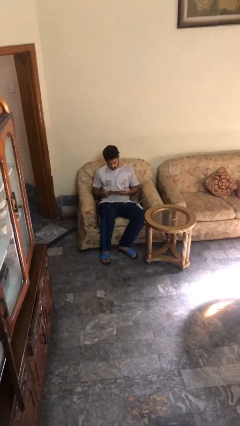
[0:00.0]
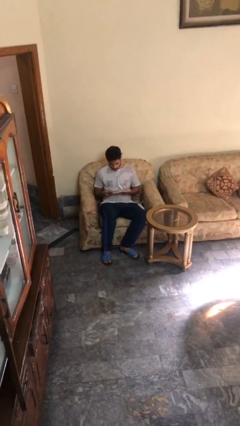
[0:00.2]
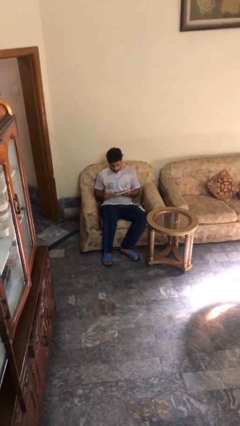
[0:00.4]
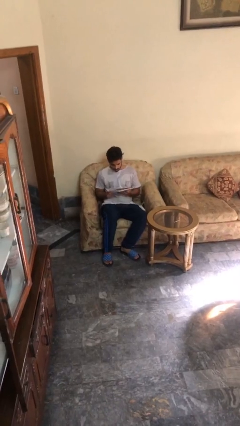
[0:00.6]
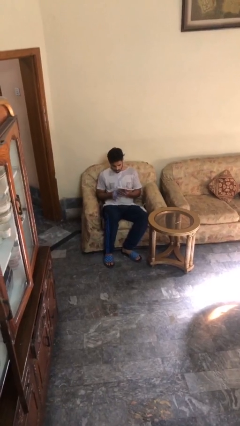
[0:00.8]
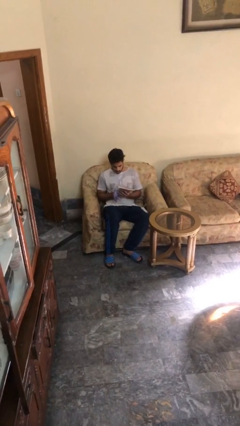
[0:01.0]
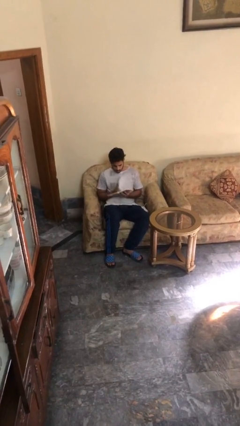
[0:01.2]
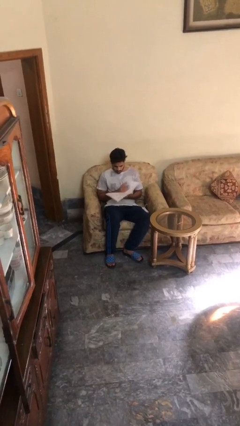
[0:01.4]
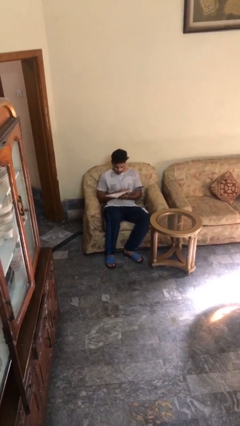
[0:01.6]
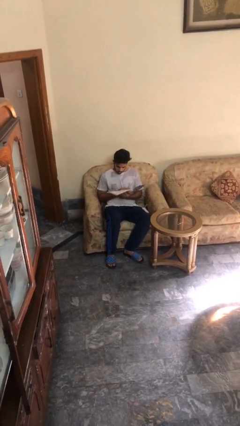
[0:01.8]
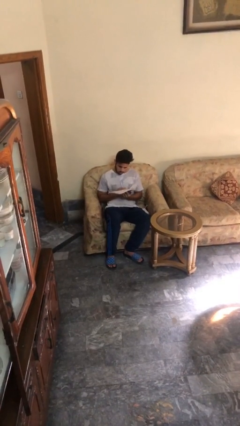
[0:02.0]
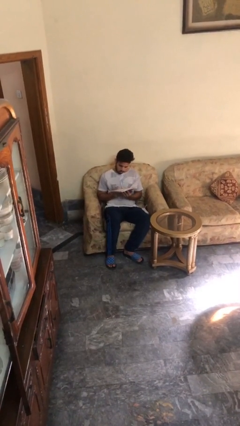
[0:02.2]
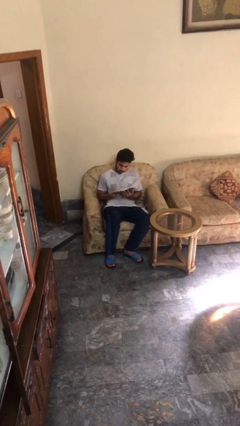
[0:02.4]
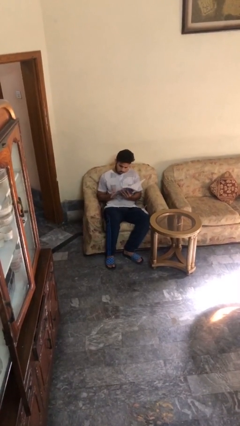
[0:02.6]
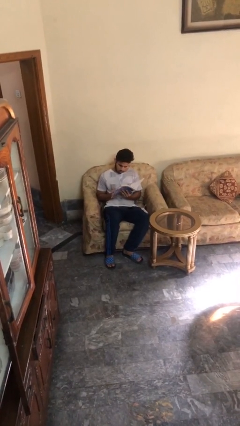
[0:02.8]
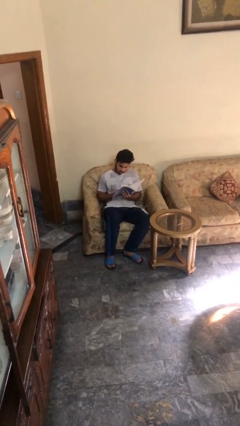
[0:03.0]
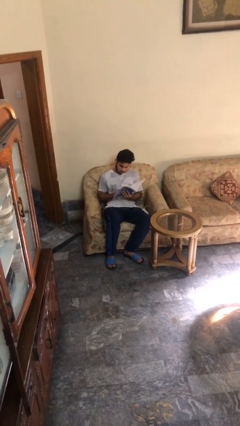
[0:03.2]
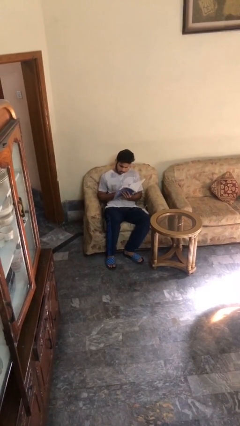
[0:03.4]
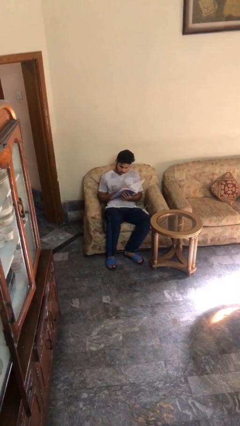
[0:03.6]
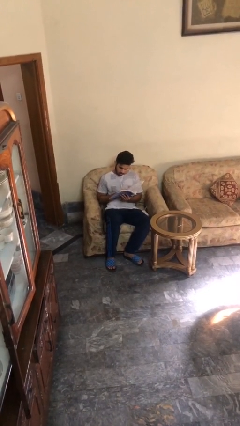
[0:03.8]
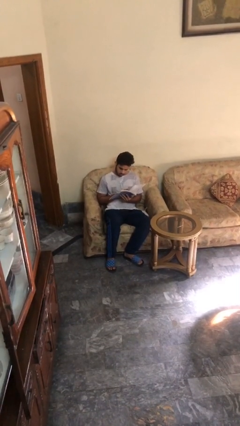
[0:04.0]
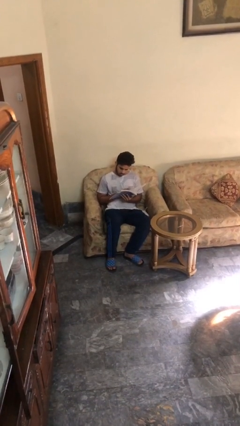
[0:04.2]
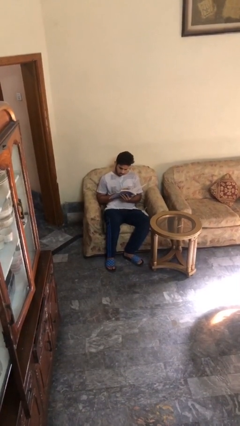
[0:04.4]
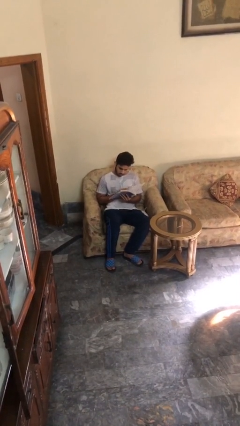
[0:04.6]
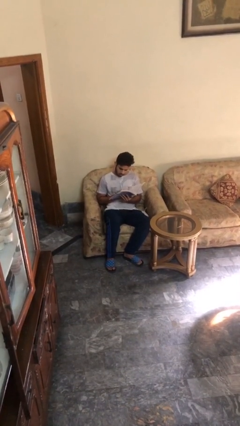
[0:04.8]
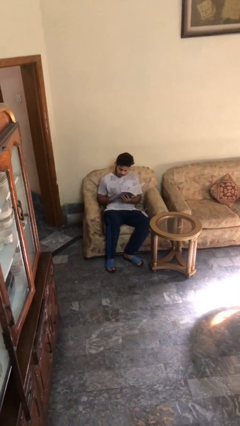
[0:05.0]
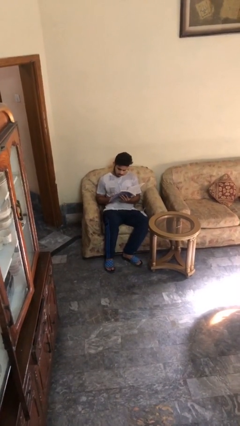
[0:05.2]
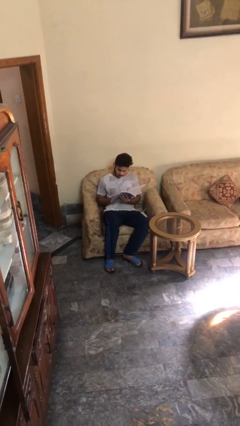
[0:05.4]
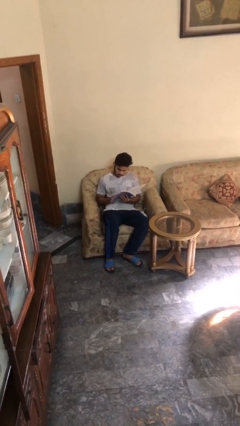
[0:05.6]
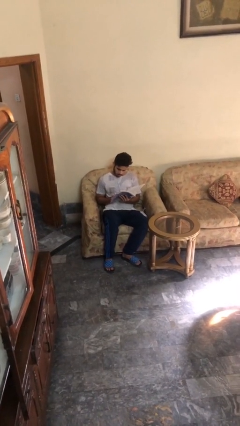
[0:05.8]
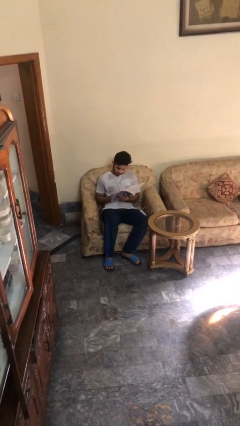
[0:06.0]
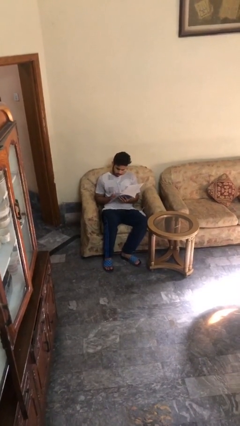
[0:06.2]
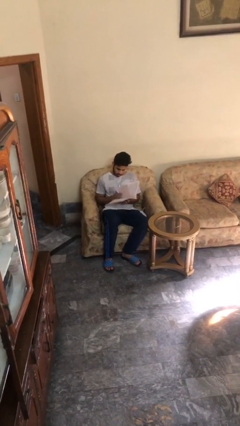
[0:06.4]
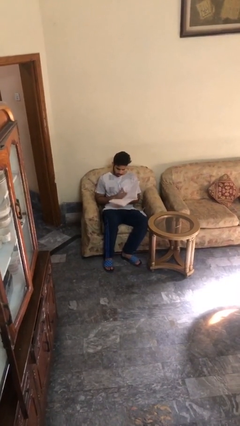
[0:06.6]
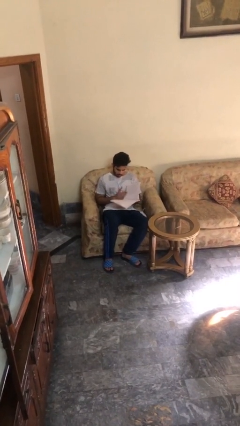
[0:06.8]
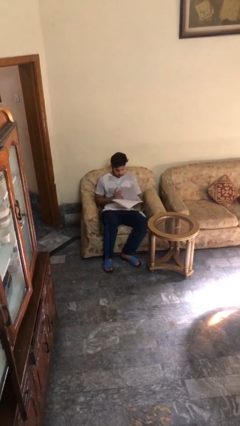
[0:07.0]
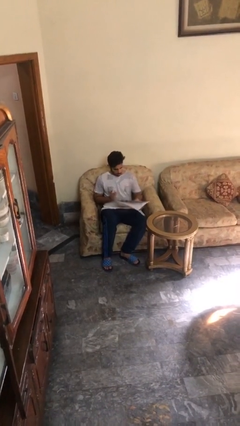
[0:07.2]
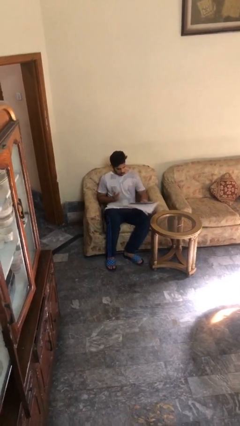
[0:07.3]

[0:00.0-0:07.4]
person reads document

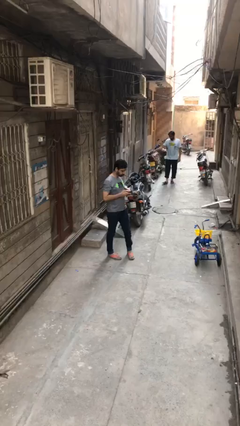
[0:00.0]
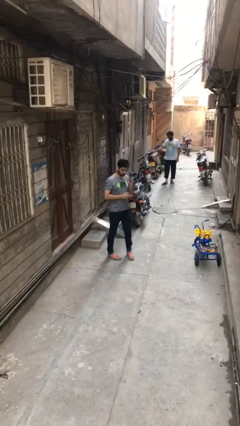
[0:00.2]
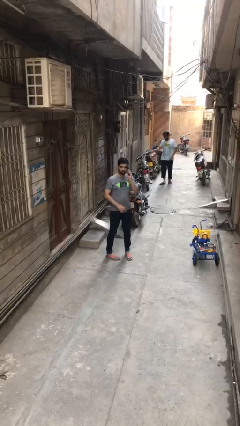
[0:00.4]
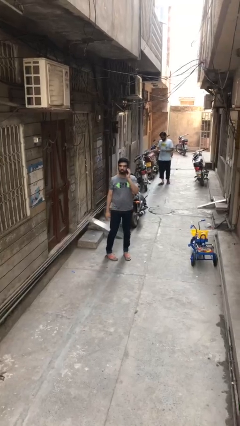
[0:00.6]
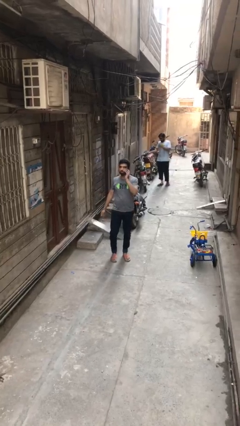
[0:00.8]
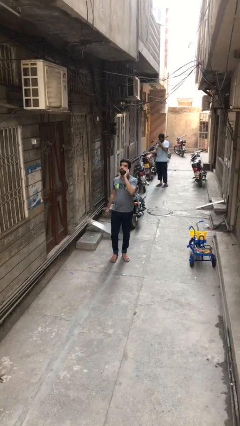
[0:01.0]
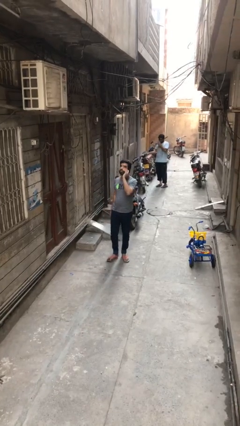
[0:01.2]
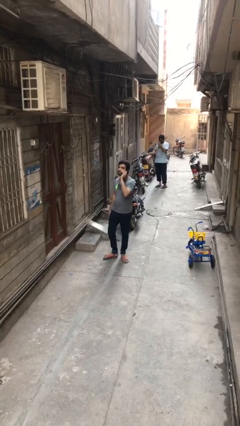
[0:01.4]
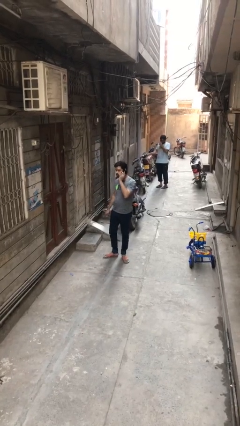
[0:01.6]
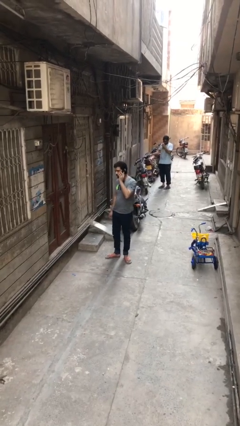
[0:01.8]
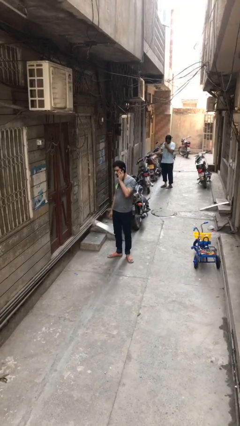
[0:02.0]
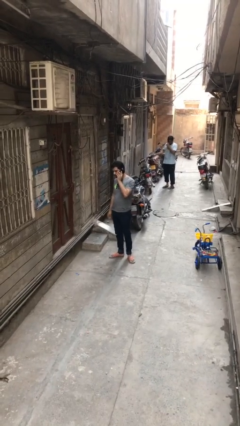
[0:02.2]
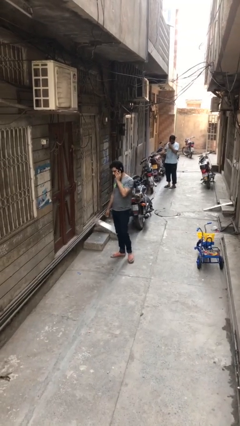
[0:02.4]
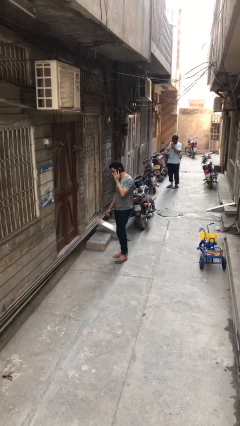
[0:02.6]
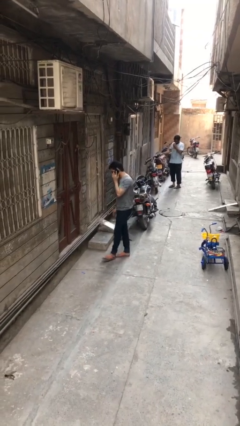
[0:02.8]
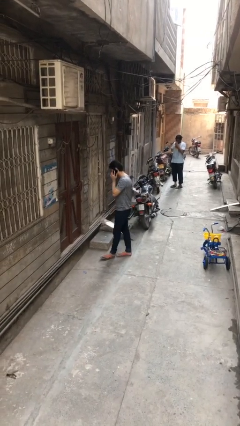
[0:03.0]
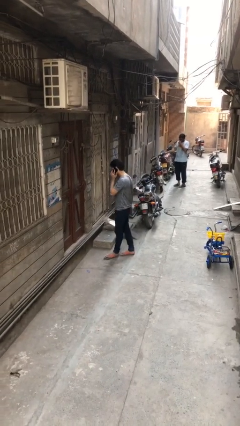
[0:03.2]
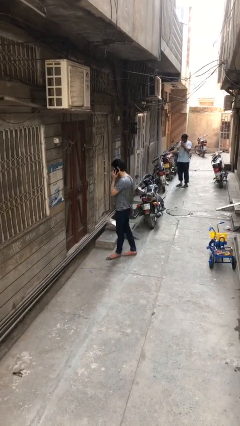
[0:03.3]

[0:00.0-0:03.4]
person talks on phone

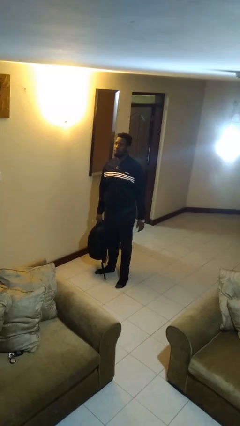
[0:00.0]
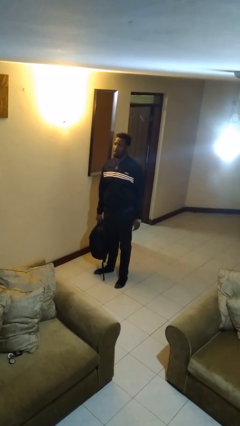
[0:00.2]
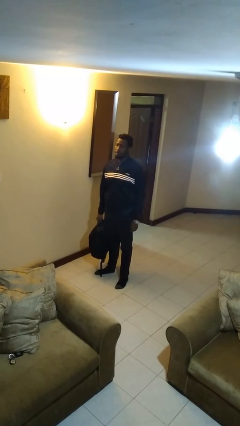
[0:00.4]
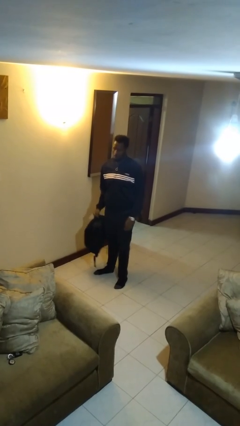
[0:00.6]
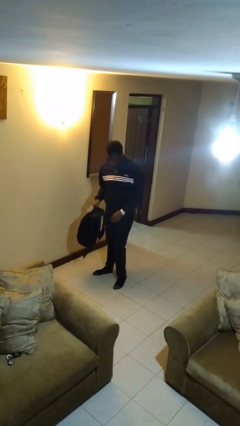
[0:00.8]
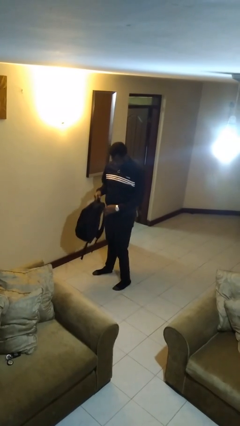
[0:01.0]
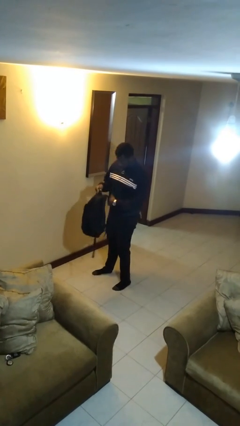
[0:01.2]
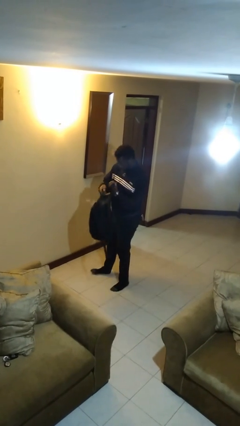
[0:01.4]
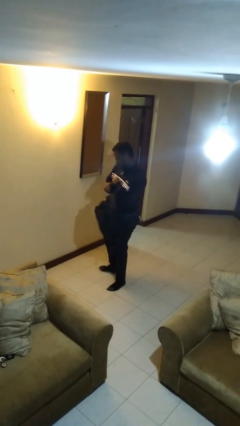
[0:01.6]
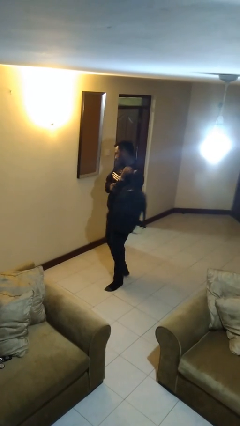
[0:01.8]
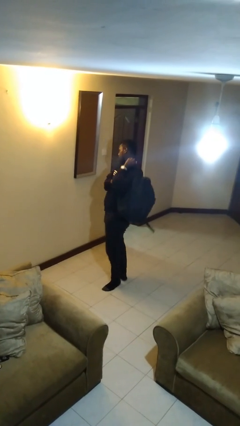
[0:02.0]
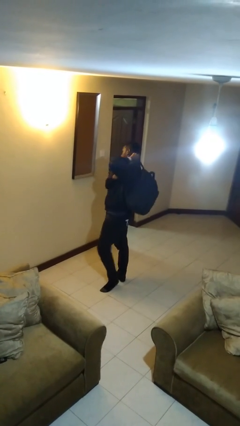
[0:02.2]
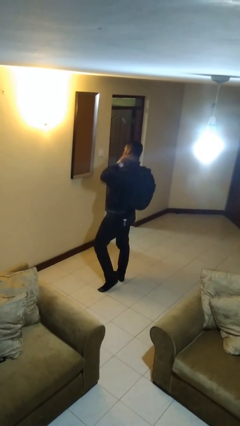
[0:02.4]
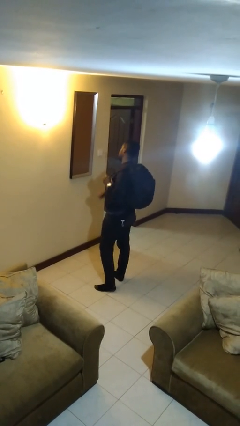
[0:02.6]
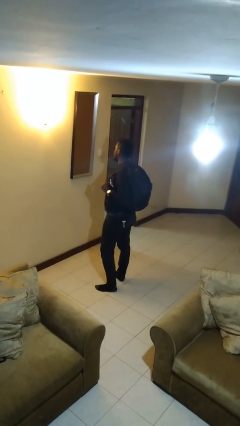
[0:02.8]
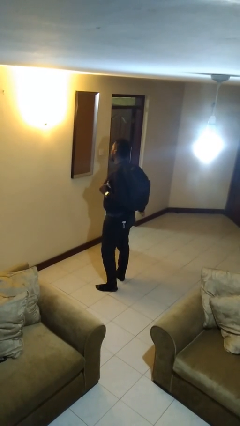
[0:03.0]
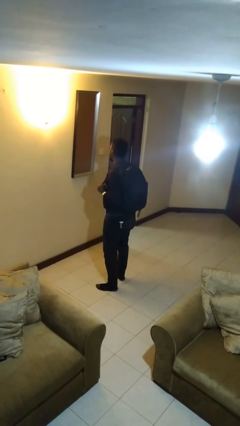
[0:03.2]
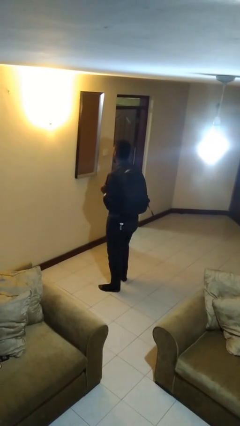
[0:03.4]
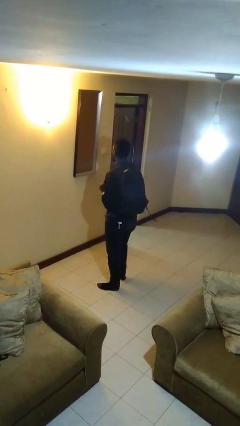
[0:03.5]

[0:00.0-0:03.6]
person puts on backpack

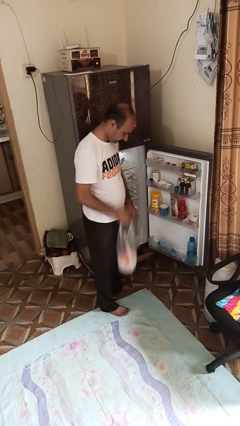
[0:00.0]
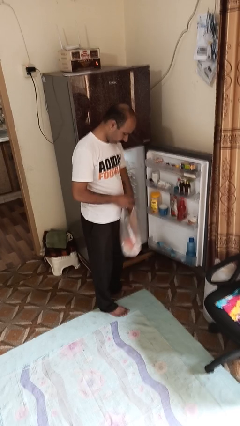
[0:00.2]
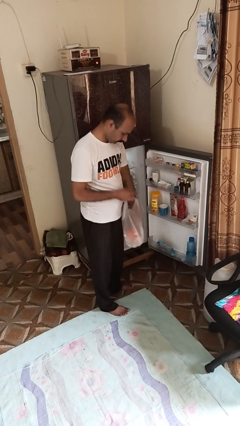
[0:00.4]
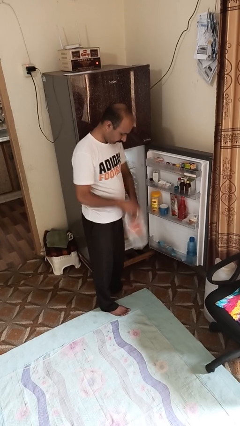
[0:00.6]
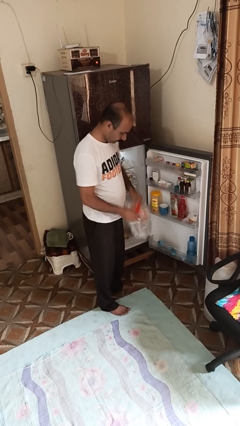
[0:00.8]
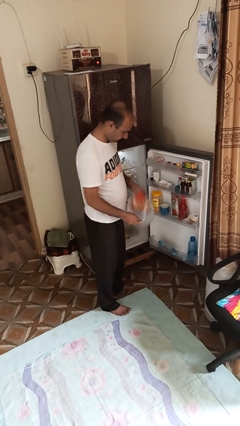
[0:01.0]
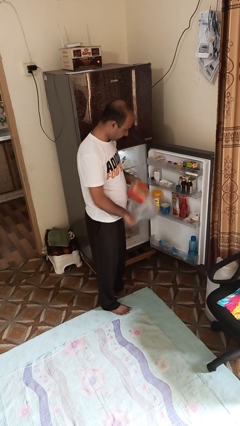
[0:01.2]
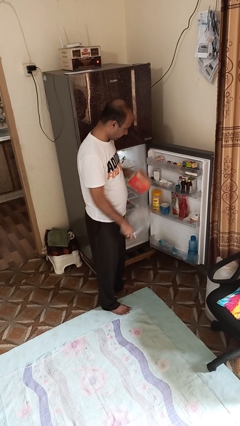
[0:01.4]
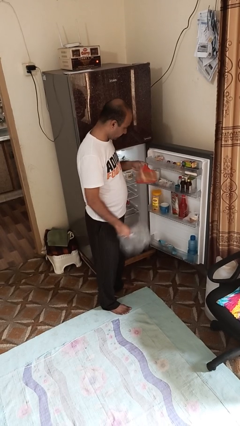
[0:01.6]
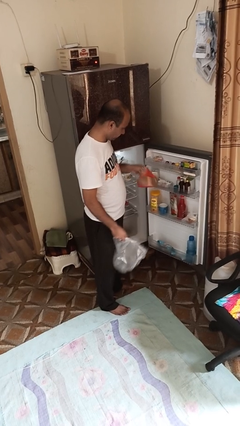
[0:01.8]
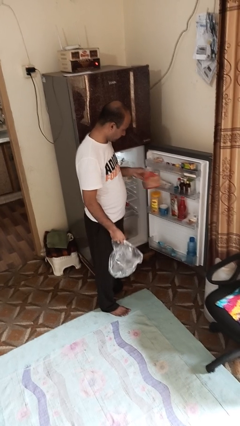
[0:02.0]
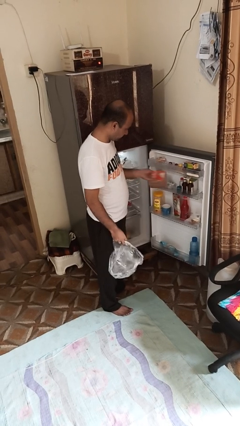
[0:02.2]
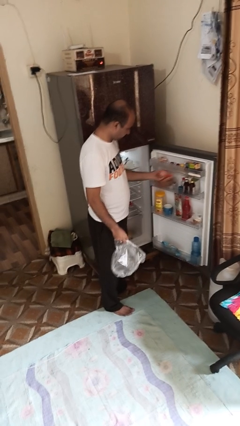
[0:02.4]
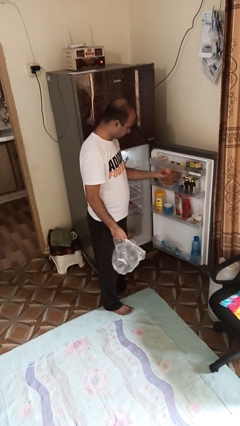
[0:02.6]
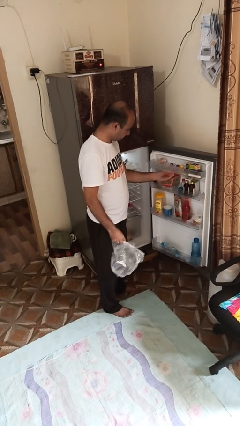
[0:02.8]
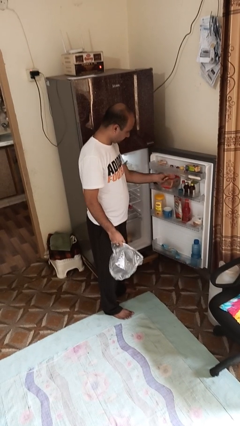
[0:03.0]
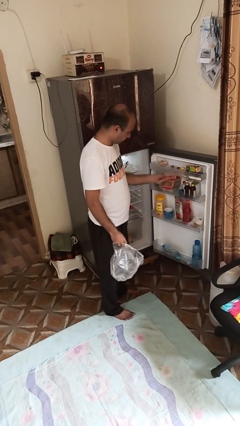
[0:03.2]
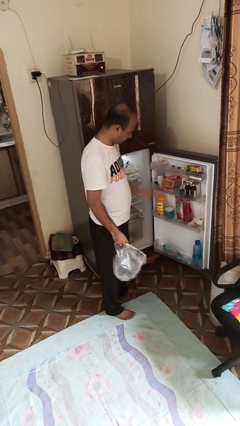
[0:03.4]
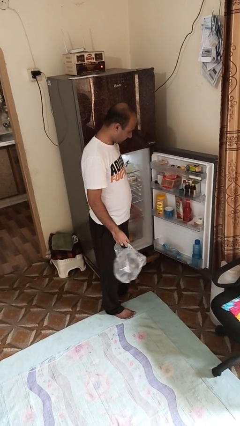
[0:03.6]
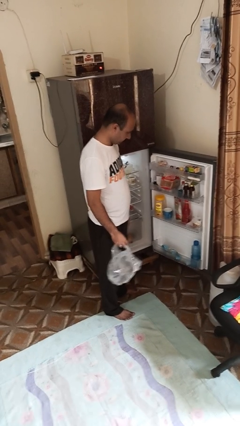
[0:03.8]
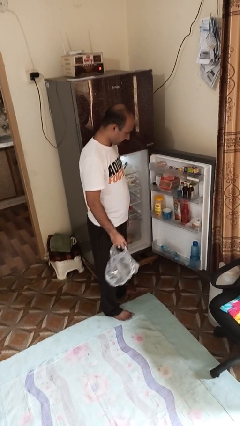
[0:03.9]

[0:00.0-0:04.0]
person loads groceries into refrigerator
